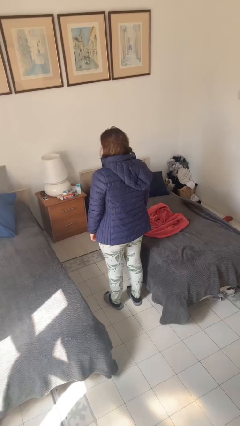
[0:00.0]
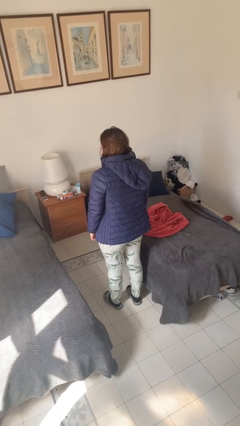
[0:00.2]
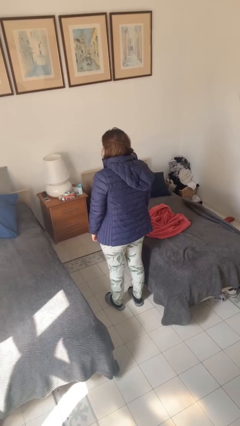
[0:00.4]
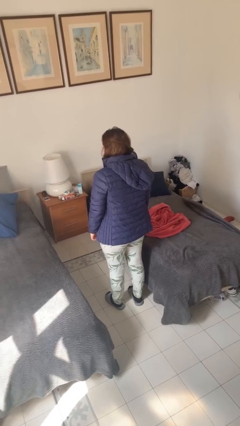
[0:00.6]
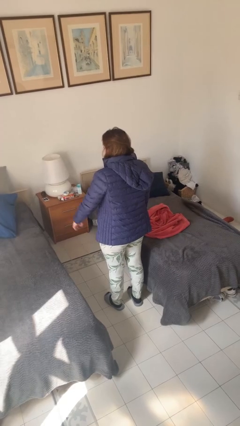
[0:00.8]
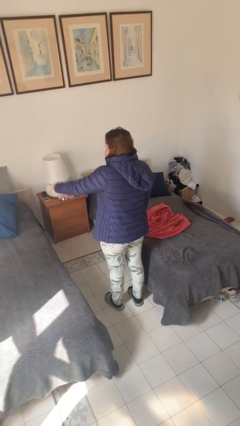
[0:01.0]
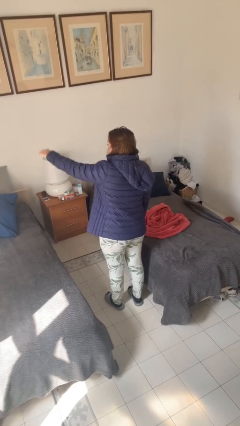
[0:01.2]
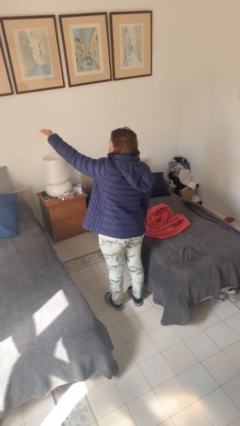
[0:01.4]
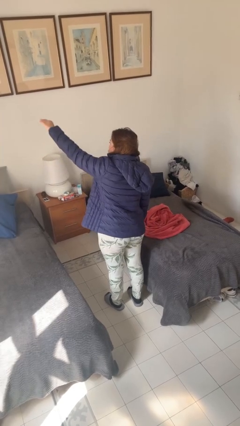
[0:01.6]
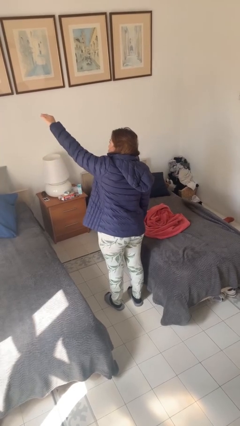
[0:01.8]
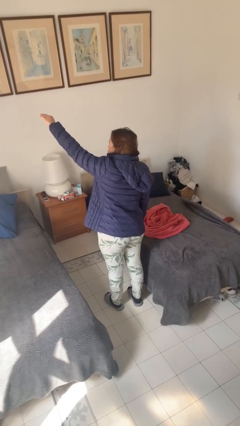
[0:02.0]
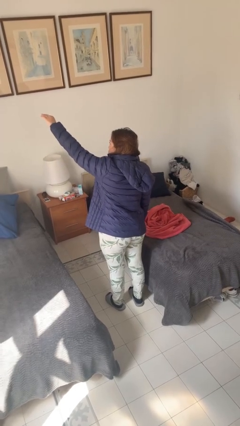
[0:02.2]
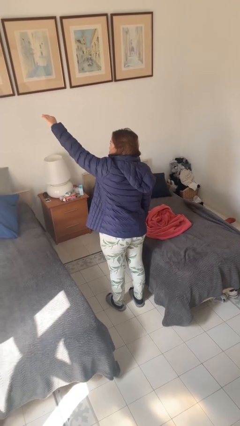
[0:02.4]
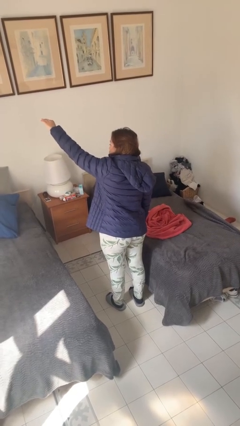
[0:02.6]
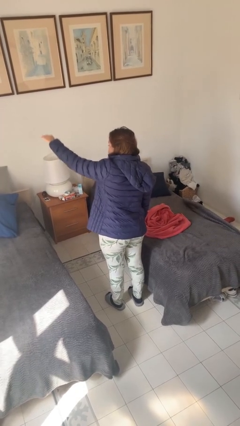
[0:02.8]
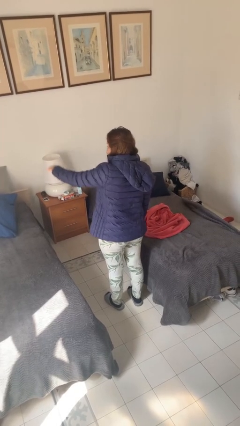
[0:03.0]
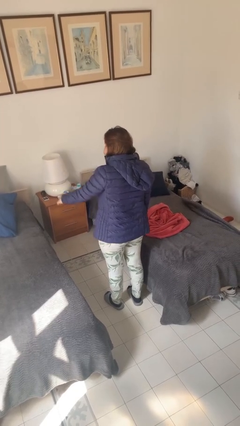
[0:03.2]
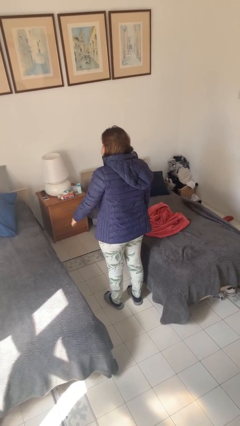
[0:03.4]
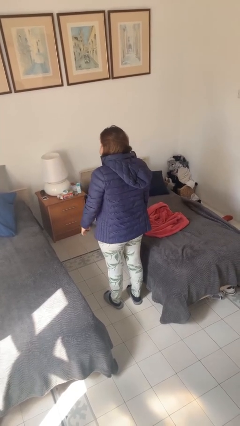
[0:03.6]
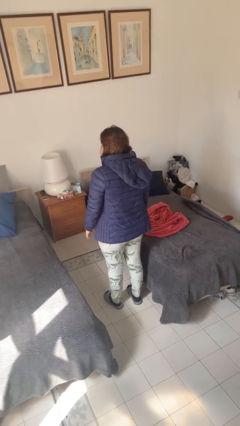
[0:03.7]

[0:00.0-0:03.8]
person gestures hang loose

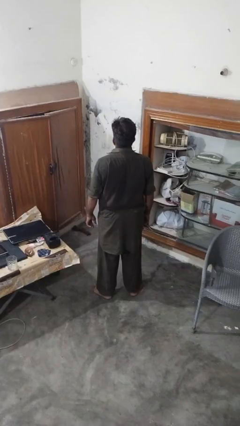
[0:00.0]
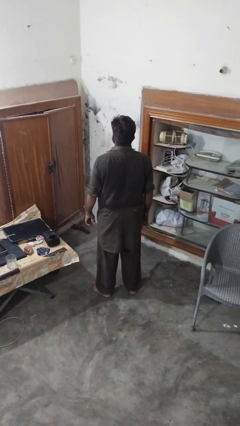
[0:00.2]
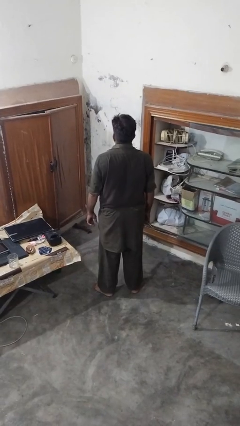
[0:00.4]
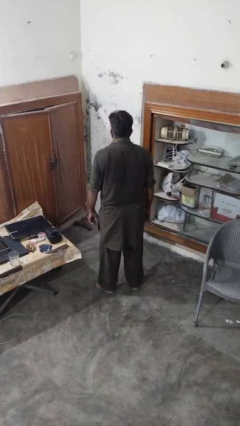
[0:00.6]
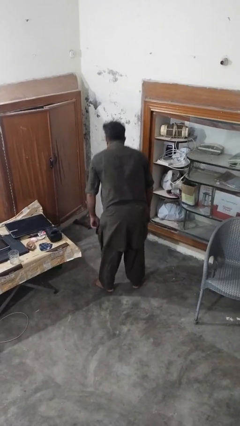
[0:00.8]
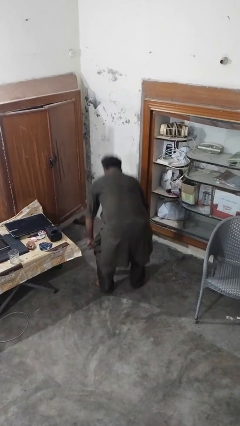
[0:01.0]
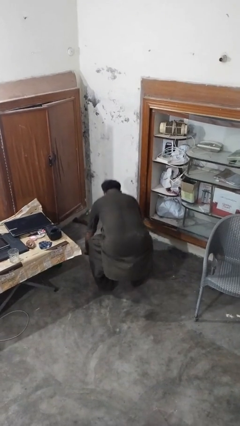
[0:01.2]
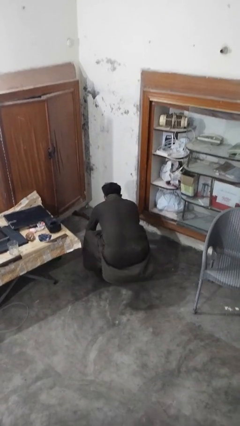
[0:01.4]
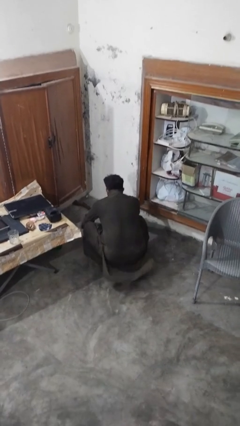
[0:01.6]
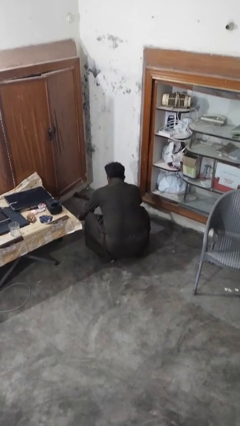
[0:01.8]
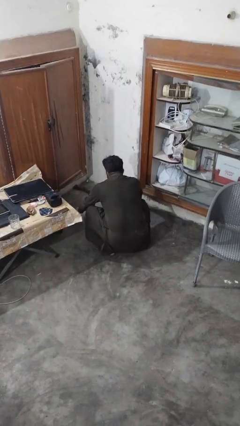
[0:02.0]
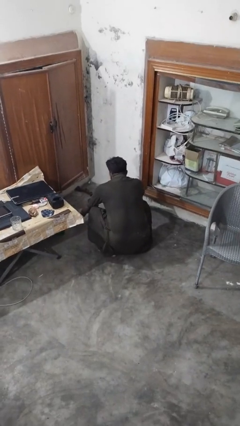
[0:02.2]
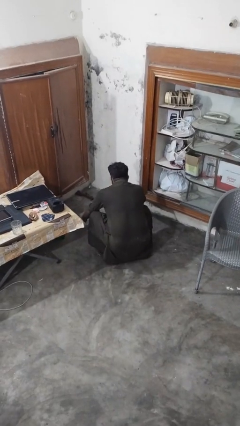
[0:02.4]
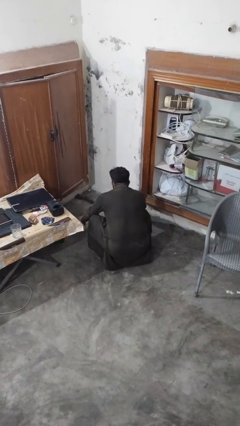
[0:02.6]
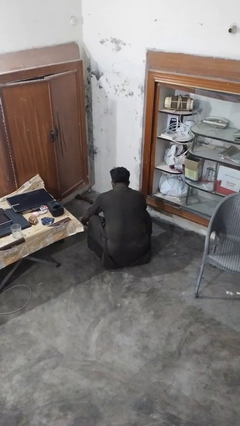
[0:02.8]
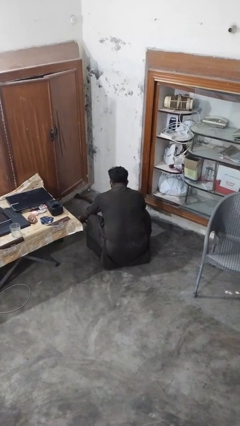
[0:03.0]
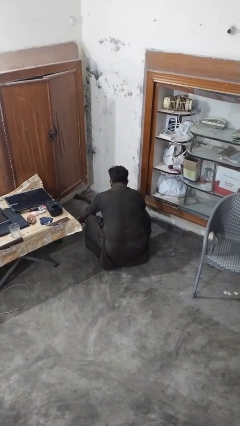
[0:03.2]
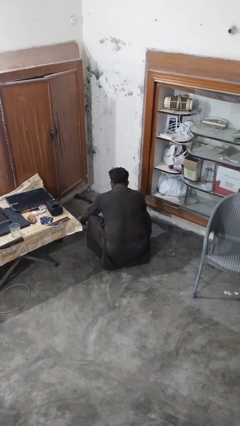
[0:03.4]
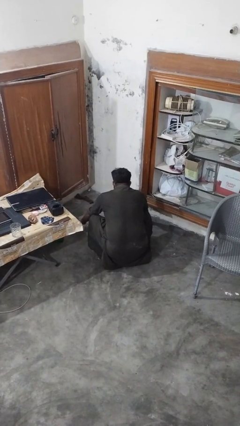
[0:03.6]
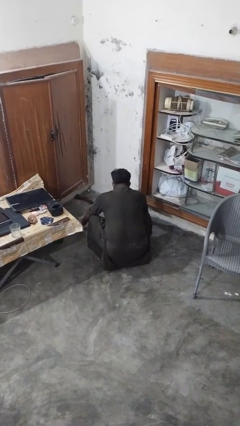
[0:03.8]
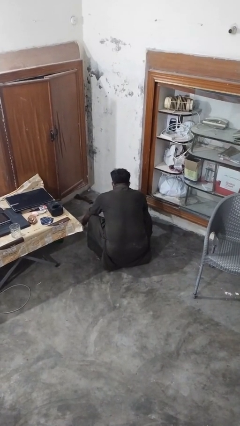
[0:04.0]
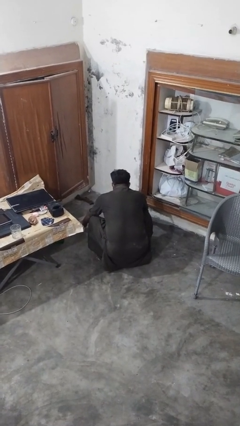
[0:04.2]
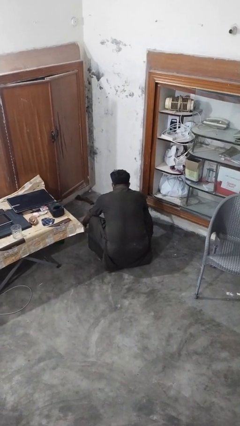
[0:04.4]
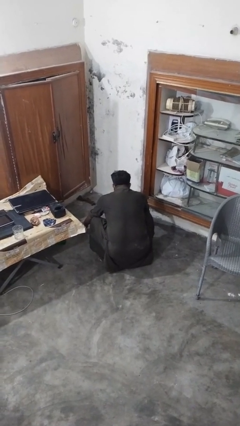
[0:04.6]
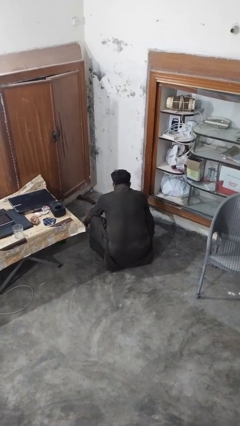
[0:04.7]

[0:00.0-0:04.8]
person squats

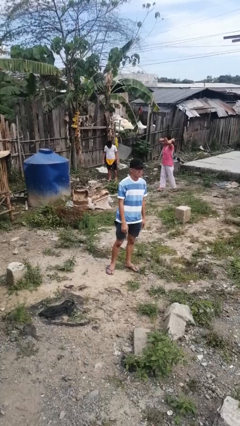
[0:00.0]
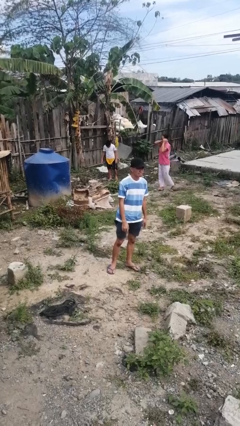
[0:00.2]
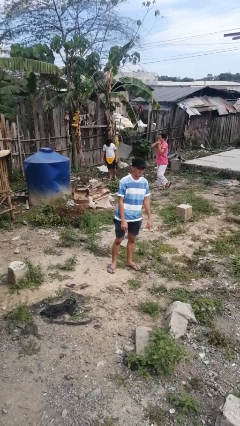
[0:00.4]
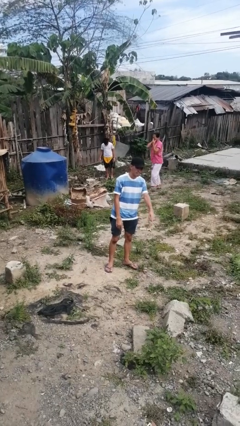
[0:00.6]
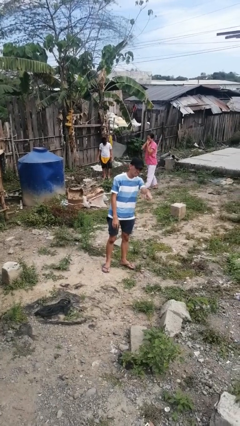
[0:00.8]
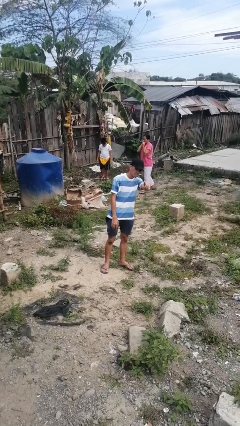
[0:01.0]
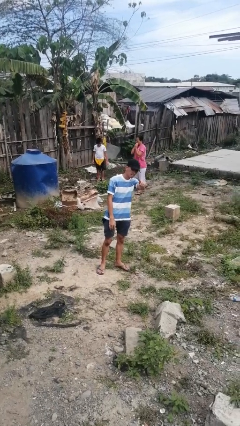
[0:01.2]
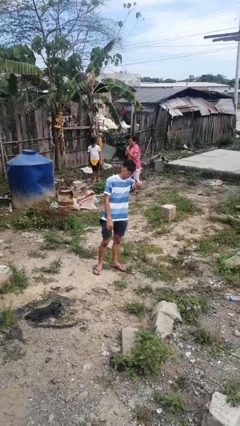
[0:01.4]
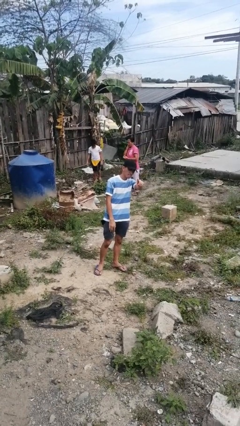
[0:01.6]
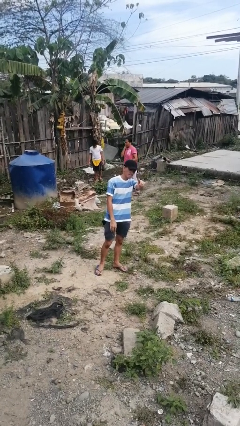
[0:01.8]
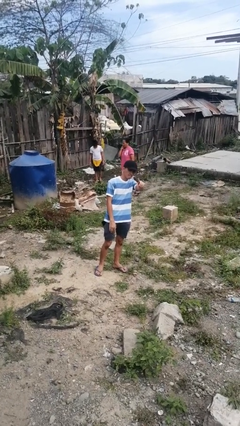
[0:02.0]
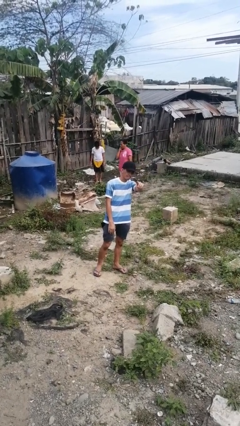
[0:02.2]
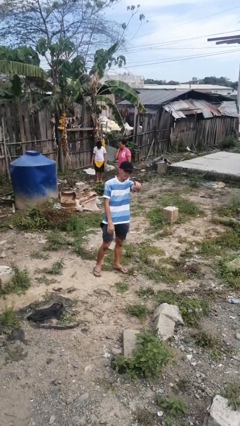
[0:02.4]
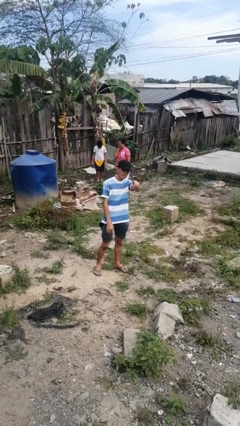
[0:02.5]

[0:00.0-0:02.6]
person points at person

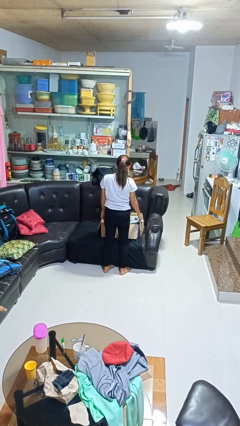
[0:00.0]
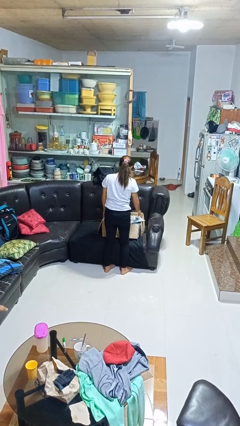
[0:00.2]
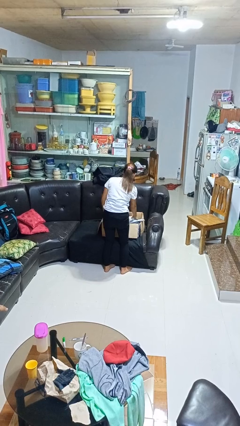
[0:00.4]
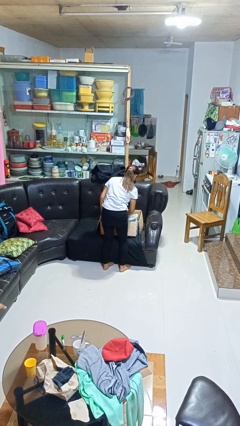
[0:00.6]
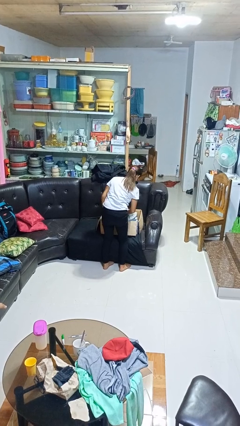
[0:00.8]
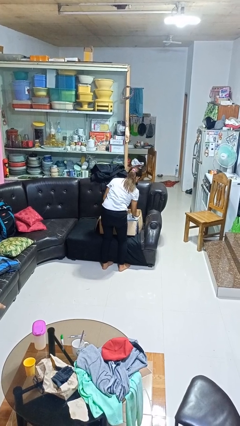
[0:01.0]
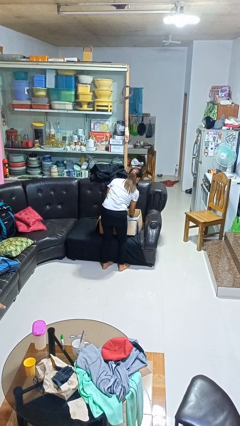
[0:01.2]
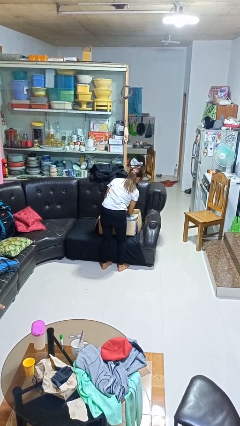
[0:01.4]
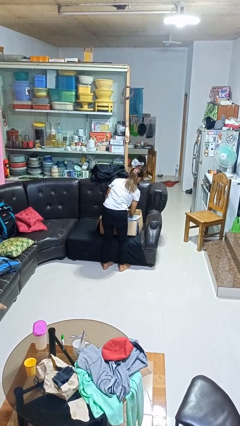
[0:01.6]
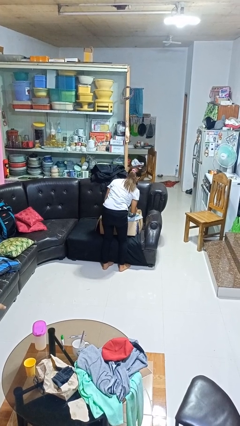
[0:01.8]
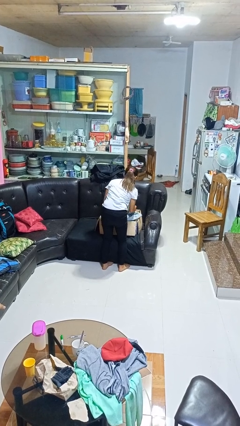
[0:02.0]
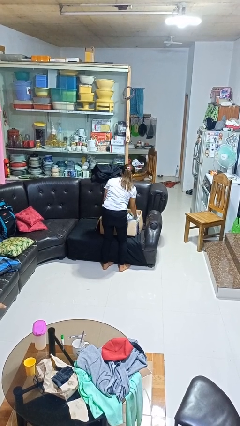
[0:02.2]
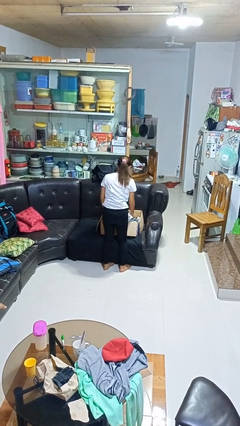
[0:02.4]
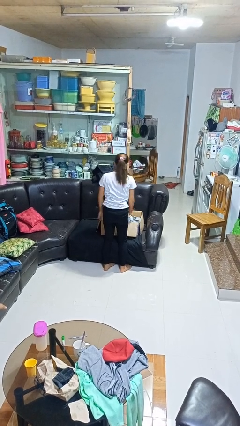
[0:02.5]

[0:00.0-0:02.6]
person searches in box

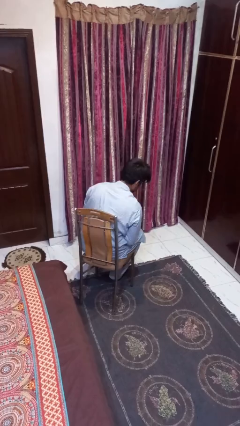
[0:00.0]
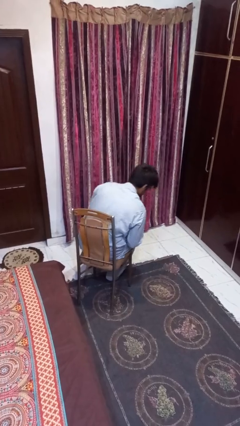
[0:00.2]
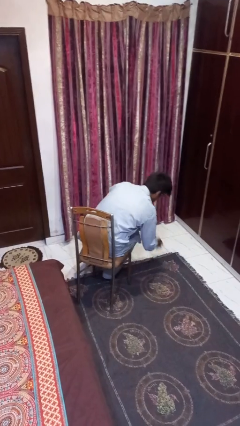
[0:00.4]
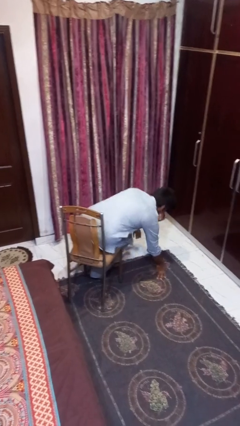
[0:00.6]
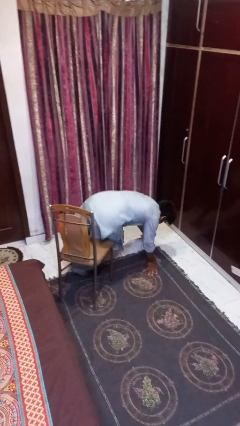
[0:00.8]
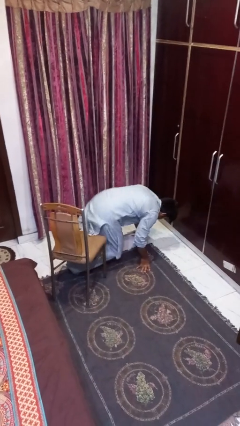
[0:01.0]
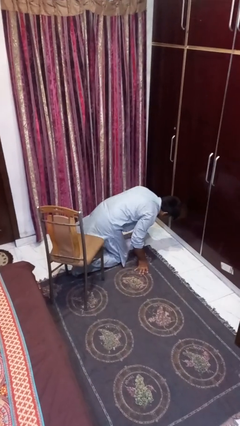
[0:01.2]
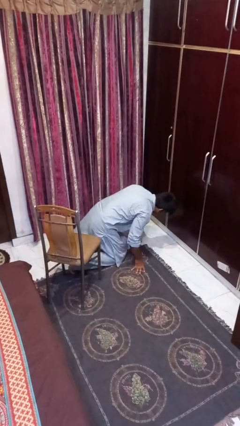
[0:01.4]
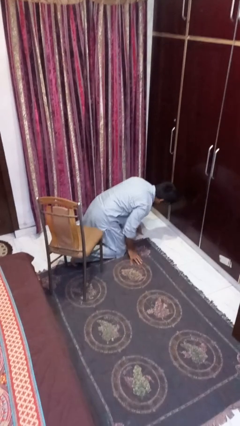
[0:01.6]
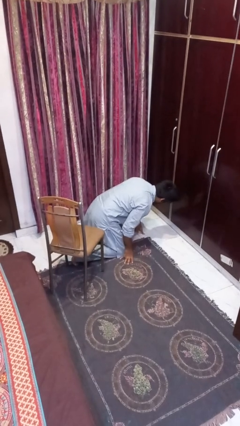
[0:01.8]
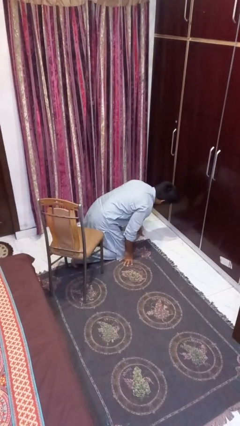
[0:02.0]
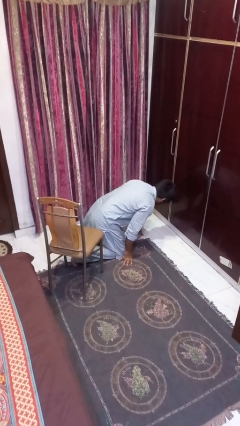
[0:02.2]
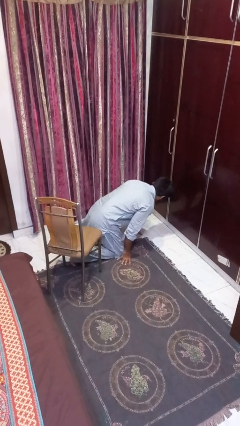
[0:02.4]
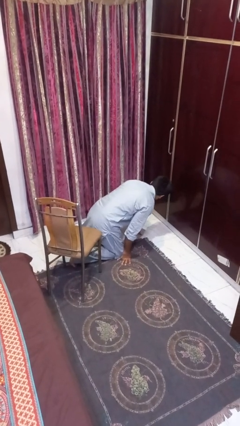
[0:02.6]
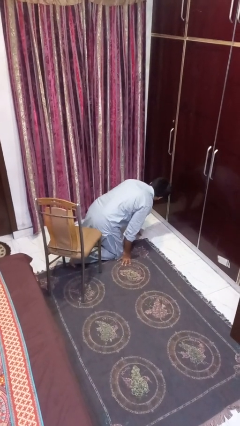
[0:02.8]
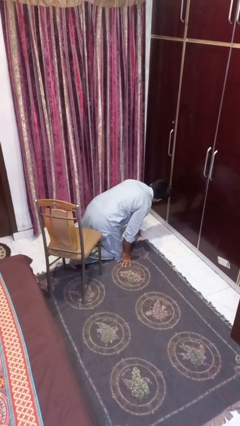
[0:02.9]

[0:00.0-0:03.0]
person falls from chair

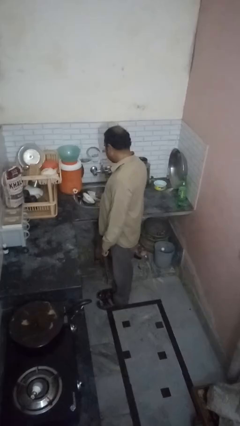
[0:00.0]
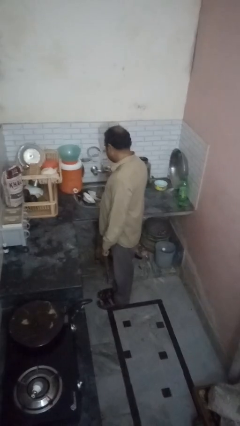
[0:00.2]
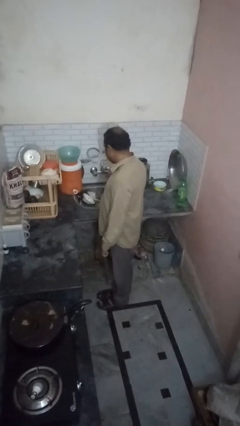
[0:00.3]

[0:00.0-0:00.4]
person opens dishwasher

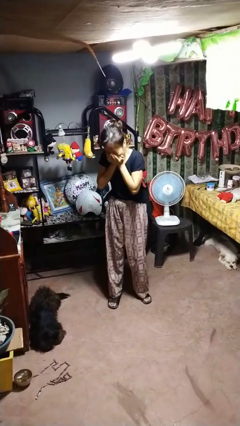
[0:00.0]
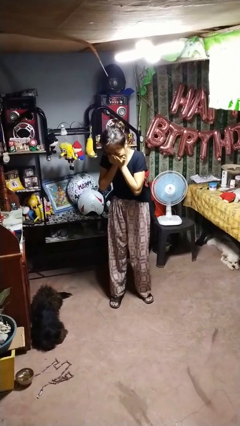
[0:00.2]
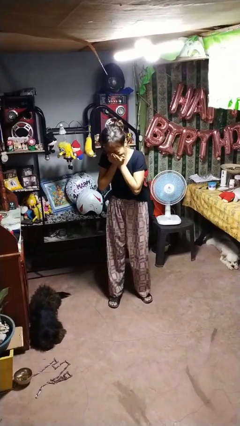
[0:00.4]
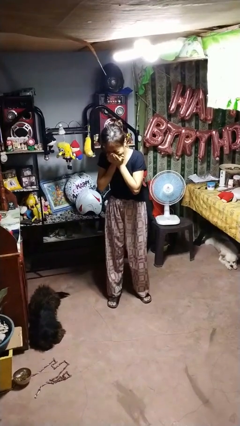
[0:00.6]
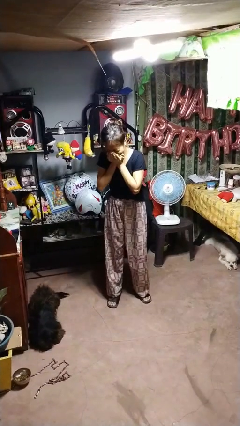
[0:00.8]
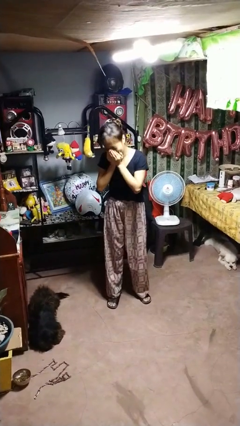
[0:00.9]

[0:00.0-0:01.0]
person sneezes into hand
